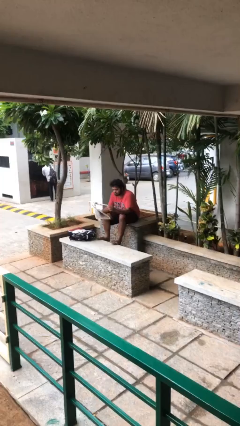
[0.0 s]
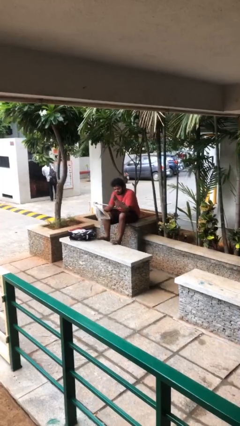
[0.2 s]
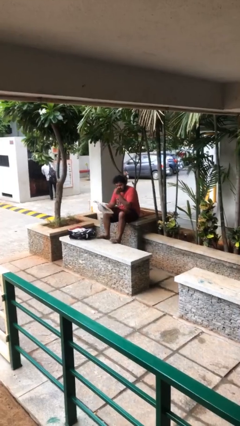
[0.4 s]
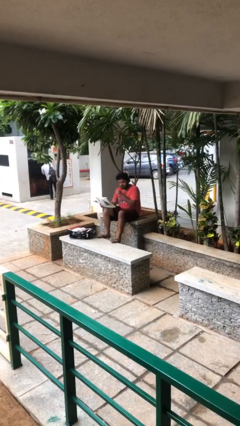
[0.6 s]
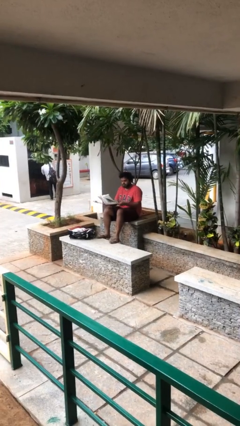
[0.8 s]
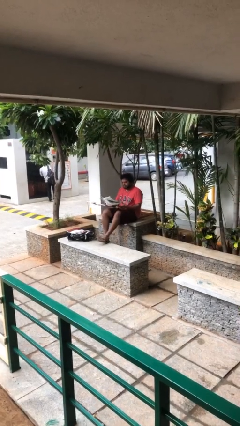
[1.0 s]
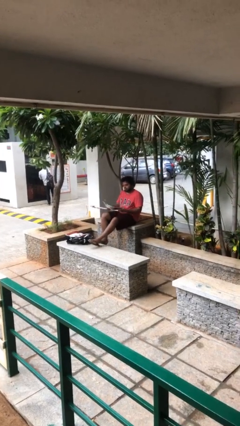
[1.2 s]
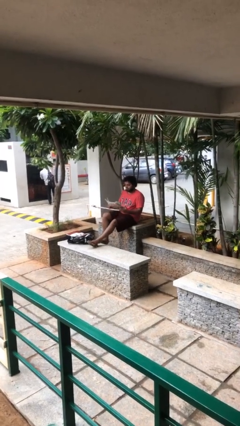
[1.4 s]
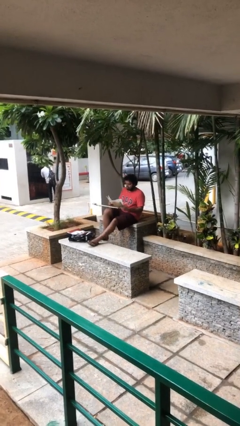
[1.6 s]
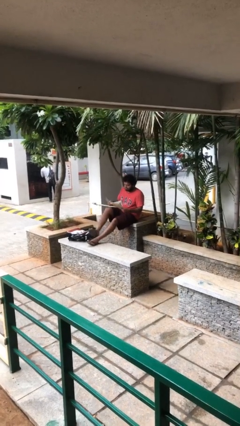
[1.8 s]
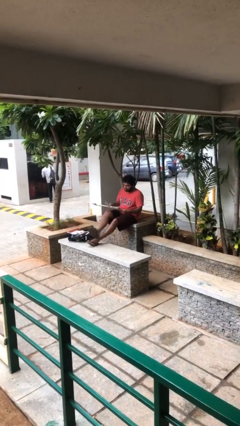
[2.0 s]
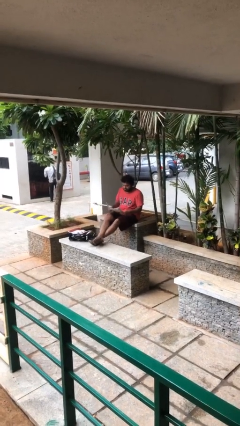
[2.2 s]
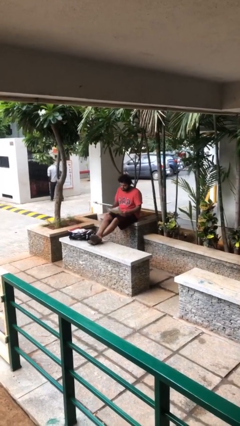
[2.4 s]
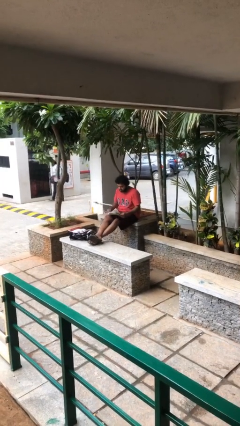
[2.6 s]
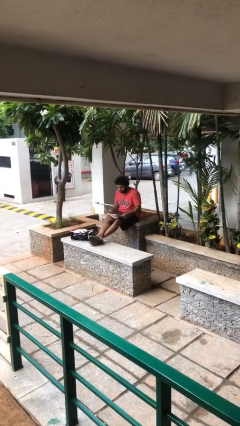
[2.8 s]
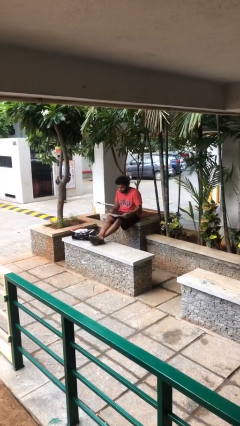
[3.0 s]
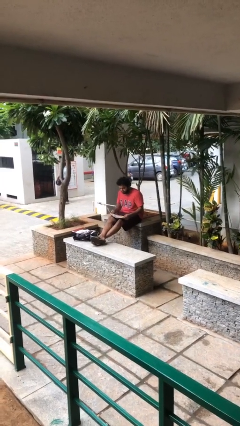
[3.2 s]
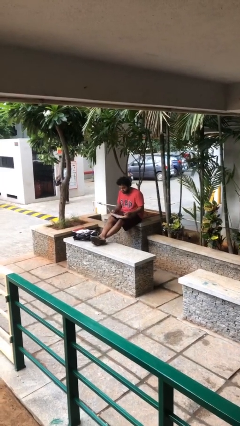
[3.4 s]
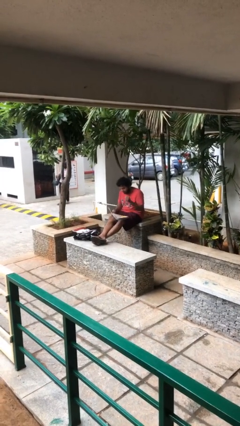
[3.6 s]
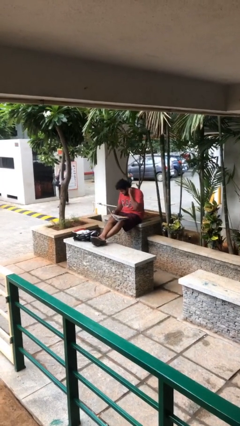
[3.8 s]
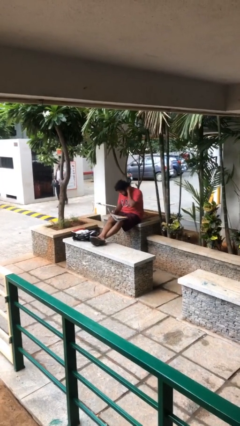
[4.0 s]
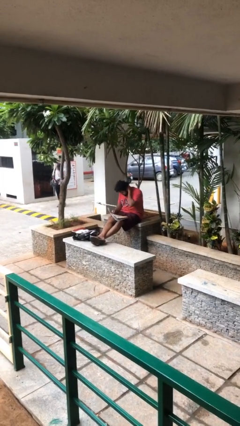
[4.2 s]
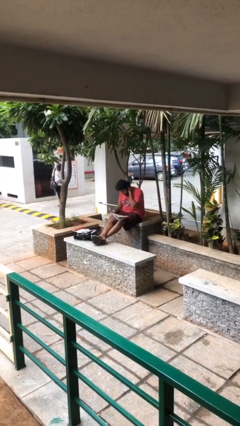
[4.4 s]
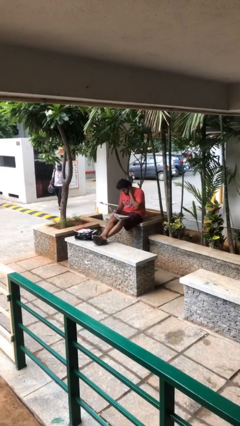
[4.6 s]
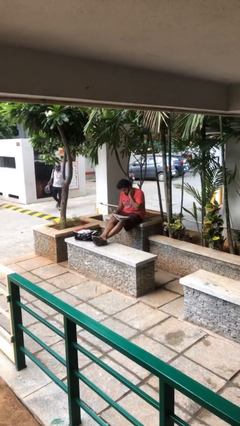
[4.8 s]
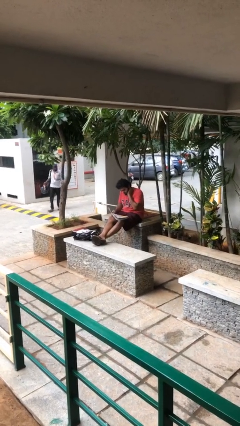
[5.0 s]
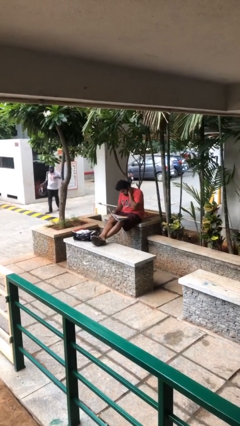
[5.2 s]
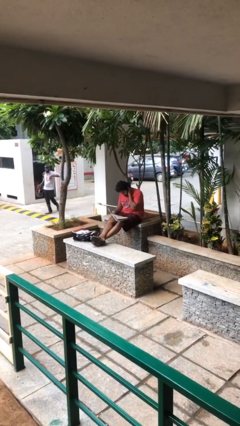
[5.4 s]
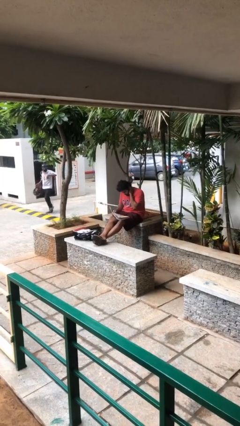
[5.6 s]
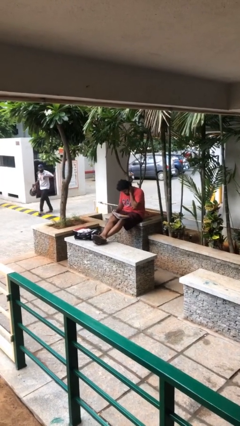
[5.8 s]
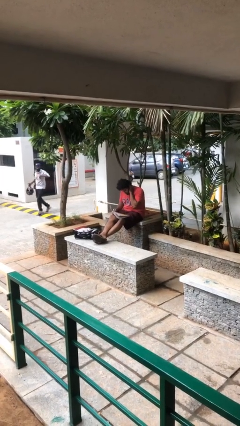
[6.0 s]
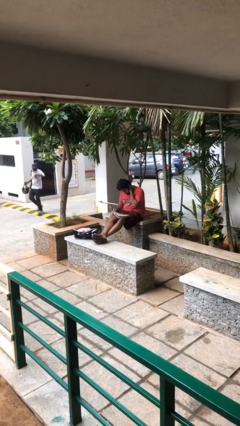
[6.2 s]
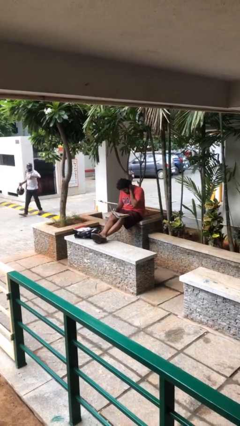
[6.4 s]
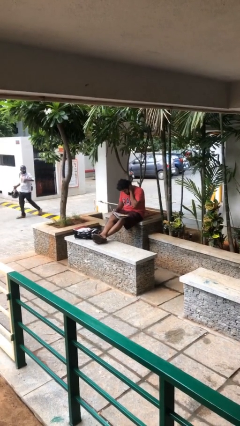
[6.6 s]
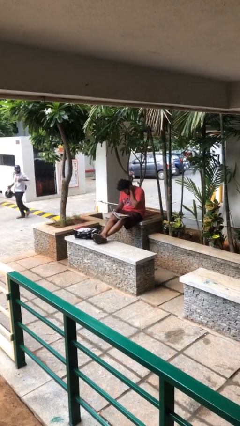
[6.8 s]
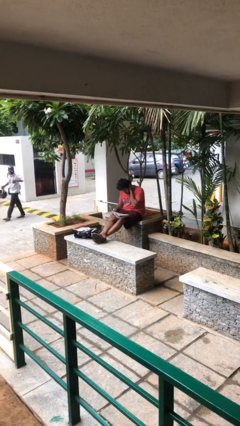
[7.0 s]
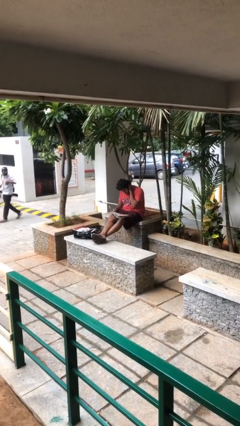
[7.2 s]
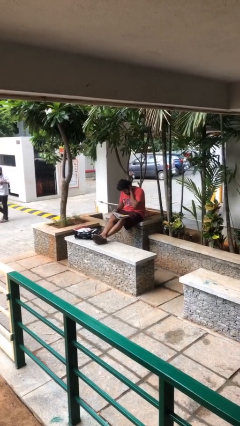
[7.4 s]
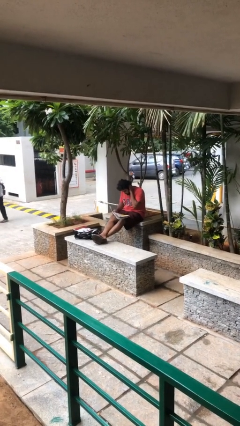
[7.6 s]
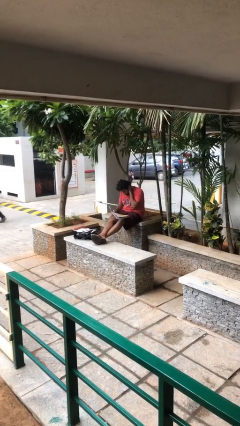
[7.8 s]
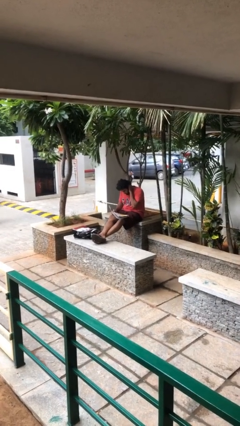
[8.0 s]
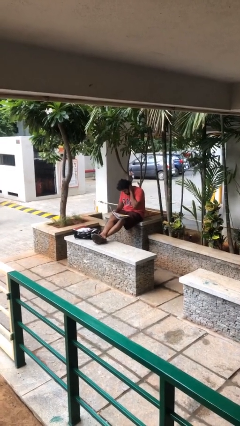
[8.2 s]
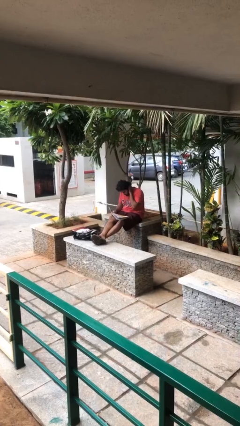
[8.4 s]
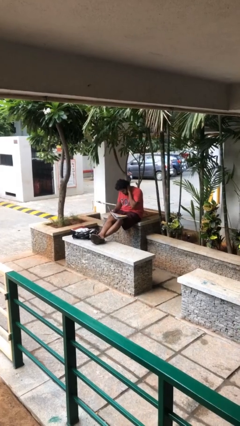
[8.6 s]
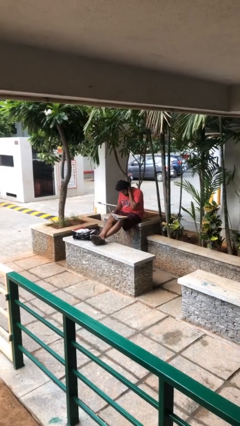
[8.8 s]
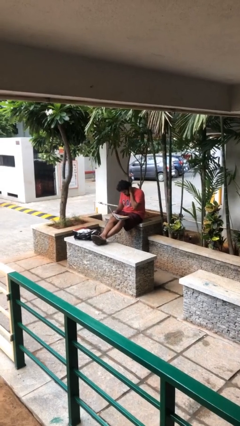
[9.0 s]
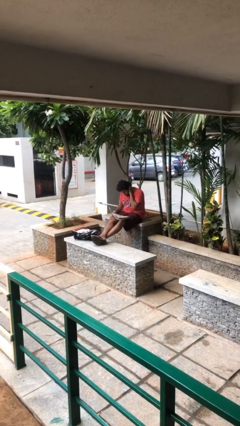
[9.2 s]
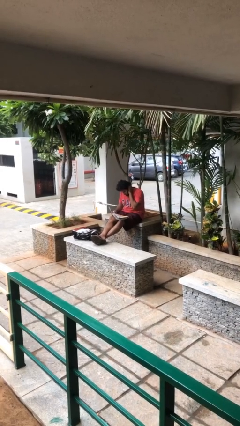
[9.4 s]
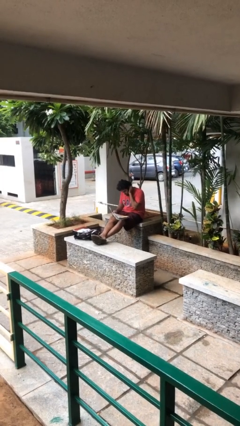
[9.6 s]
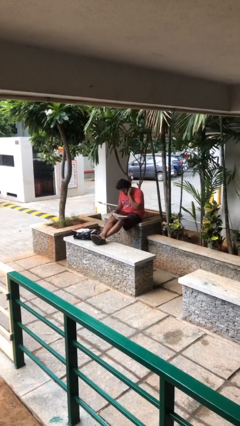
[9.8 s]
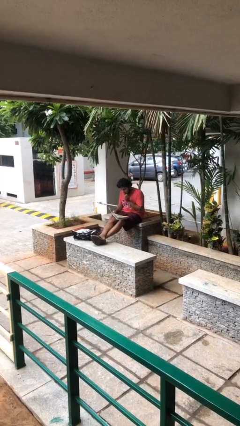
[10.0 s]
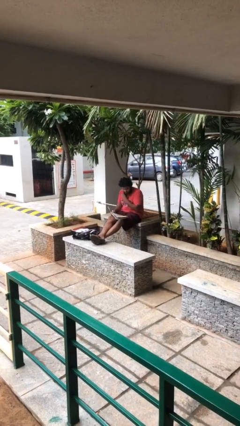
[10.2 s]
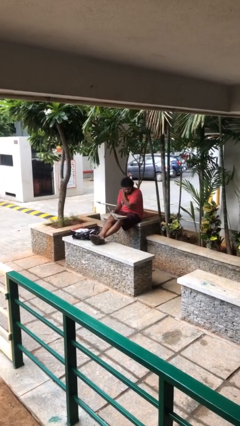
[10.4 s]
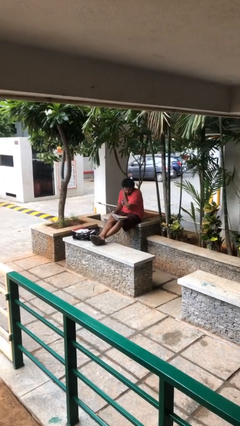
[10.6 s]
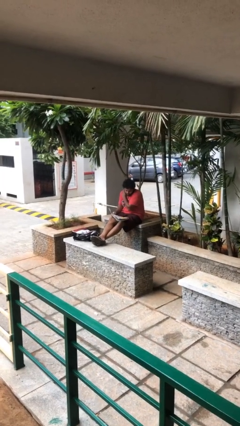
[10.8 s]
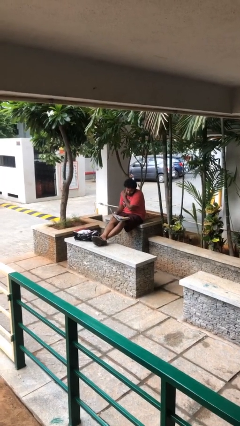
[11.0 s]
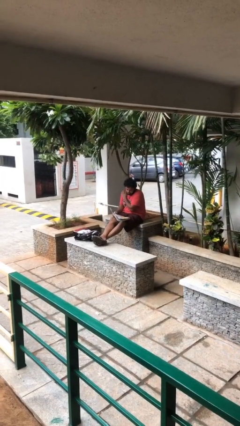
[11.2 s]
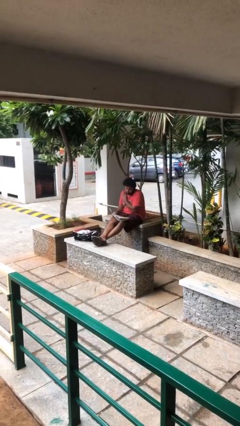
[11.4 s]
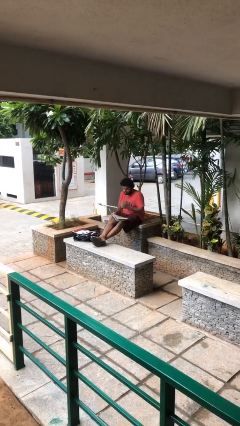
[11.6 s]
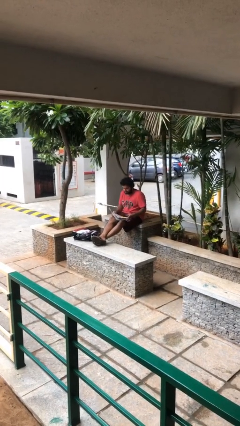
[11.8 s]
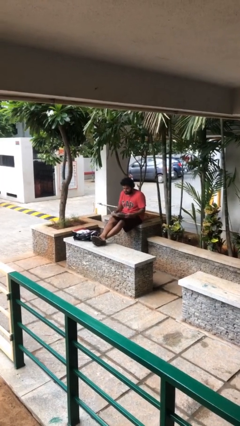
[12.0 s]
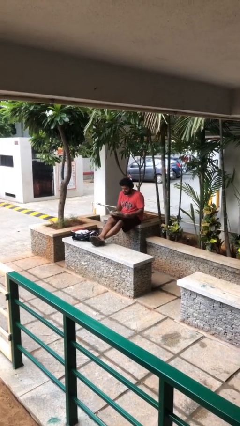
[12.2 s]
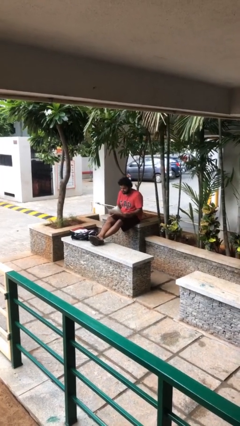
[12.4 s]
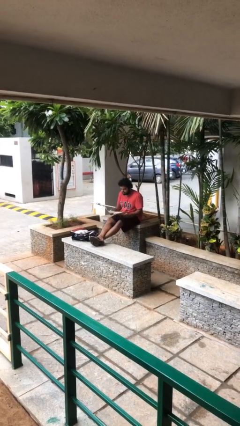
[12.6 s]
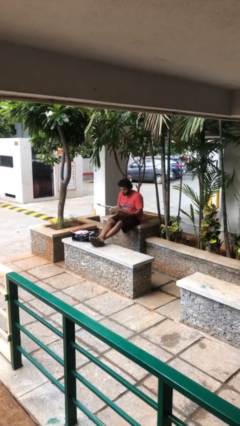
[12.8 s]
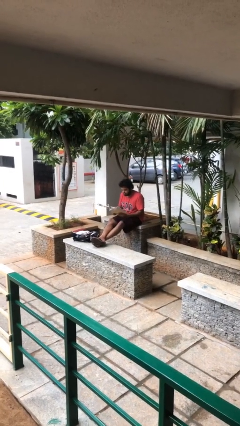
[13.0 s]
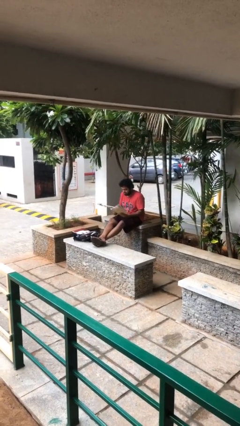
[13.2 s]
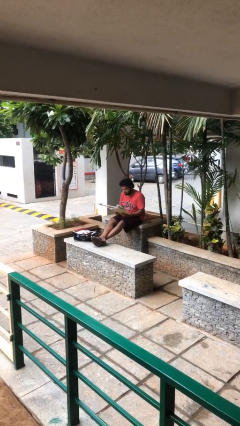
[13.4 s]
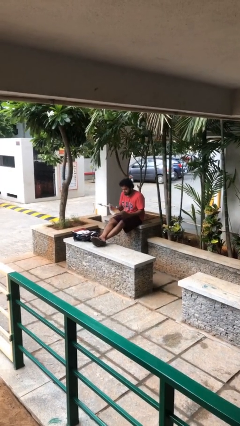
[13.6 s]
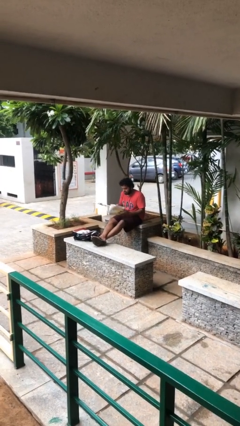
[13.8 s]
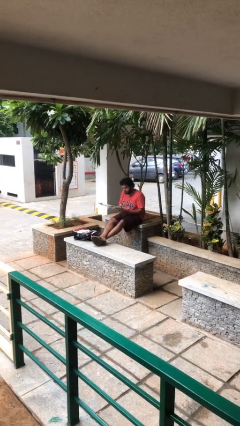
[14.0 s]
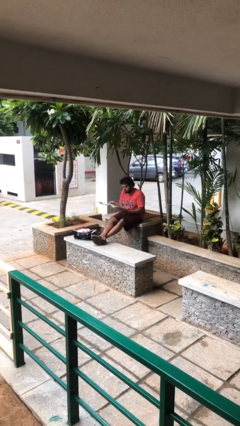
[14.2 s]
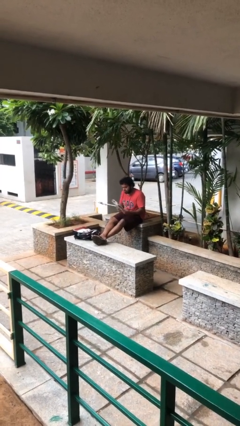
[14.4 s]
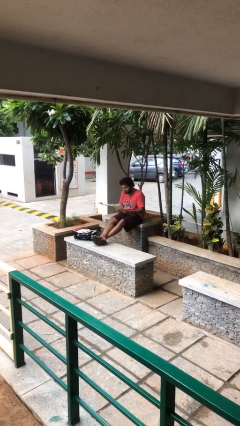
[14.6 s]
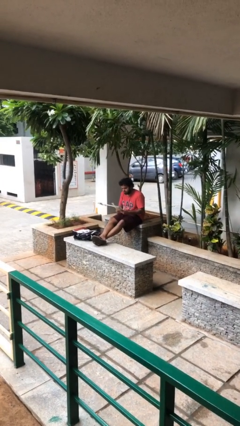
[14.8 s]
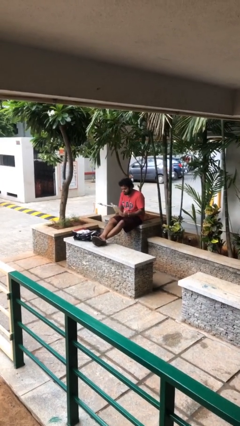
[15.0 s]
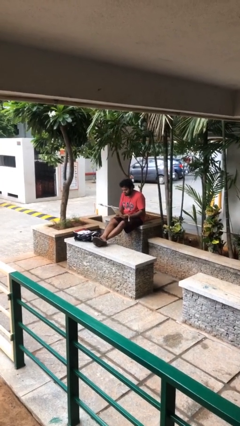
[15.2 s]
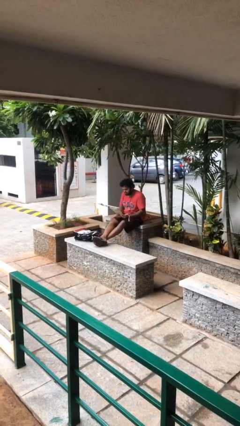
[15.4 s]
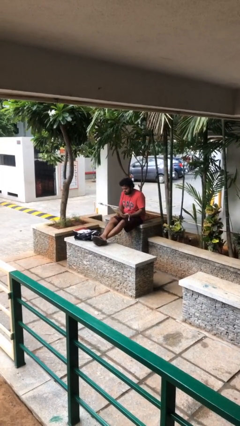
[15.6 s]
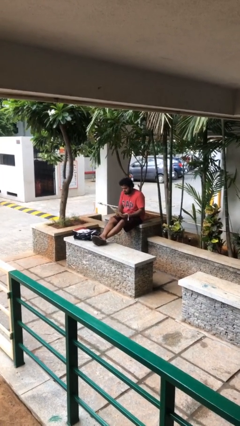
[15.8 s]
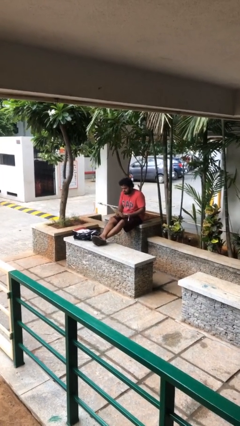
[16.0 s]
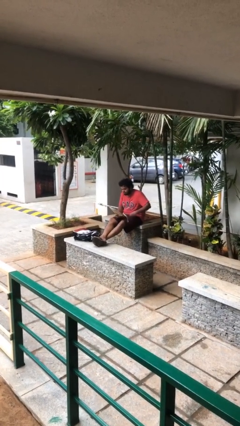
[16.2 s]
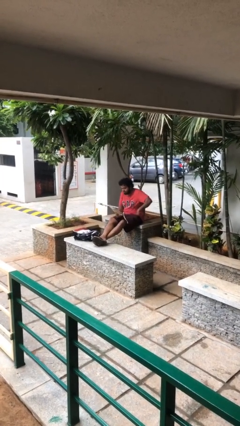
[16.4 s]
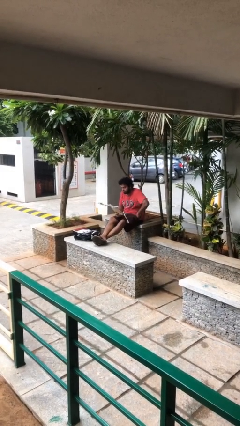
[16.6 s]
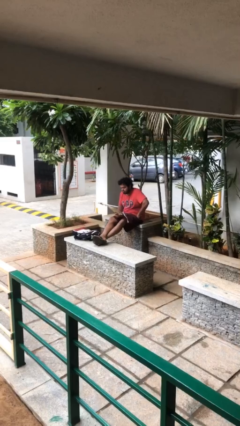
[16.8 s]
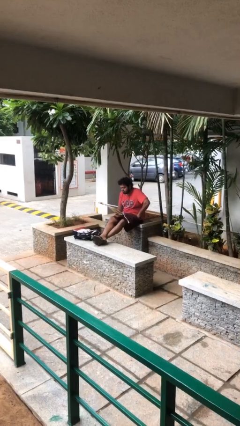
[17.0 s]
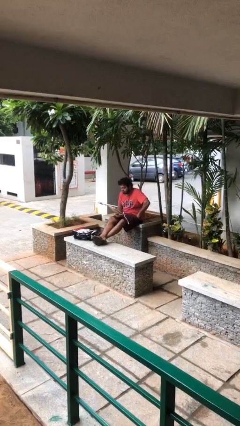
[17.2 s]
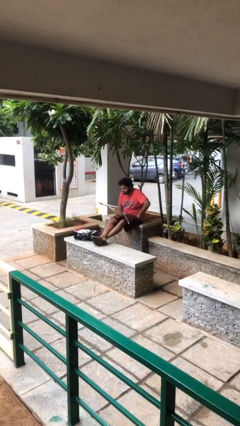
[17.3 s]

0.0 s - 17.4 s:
person reads document

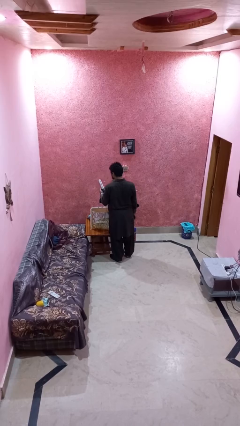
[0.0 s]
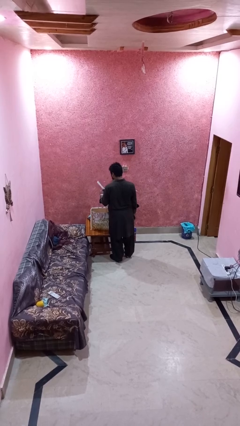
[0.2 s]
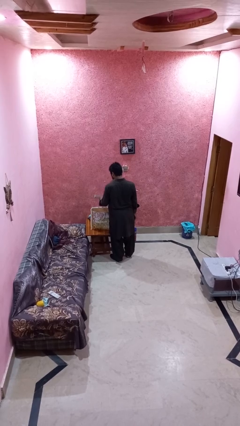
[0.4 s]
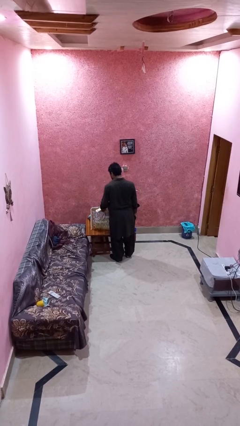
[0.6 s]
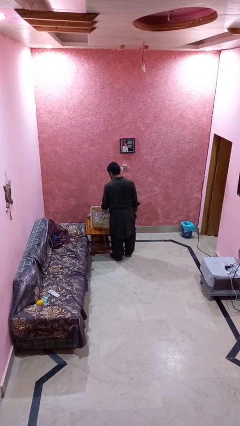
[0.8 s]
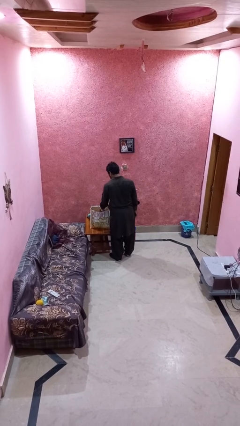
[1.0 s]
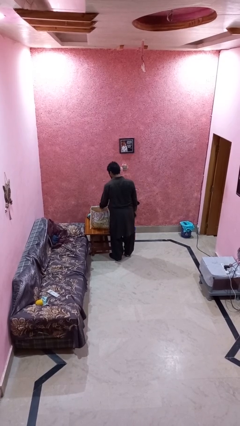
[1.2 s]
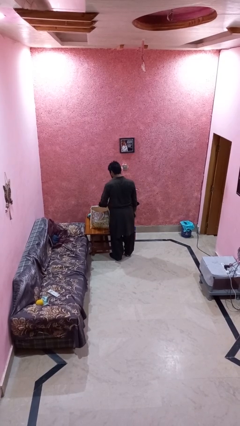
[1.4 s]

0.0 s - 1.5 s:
person puts object into bag
